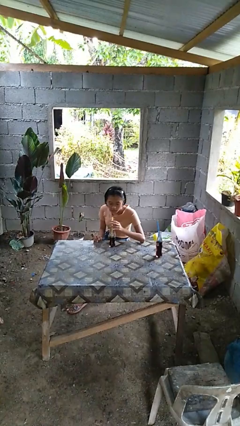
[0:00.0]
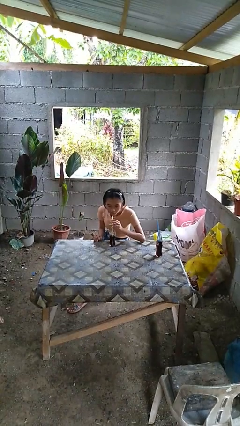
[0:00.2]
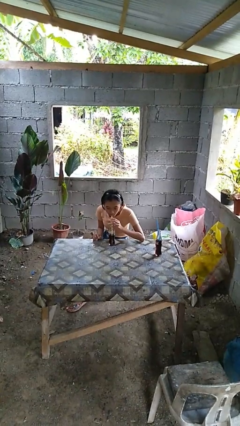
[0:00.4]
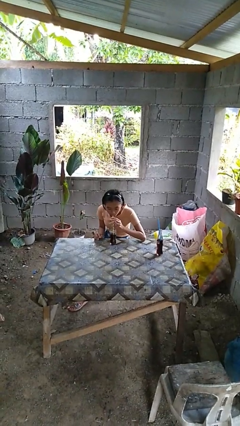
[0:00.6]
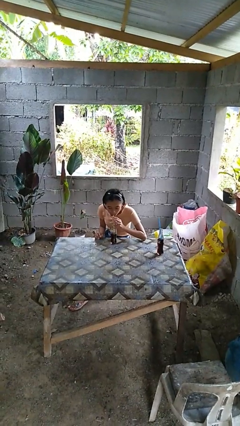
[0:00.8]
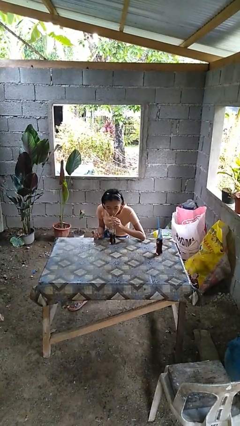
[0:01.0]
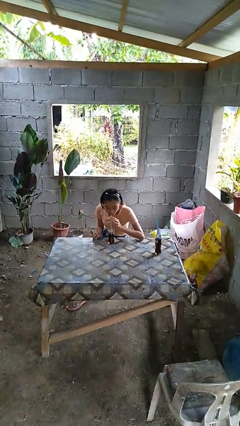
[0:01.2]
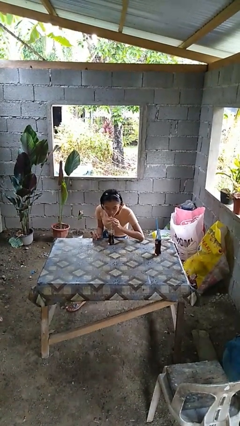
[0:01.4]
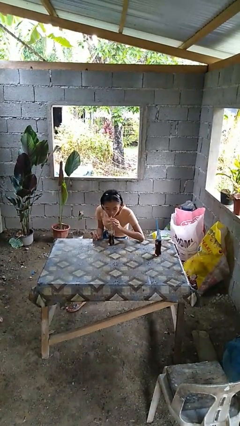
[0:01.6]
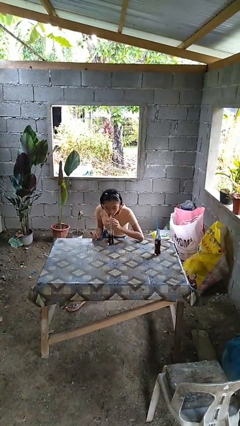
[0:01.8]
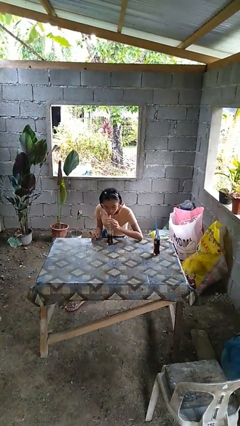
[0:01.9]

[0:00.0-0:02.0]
person drinks from straw

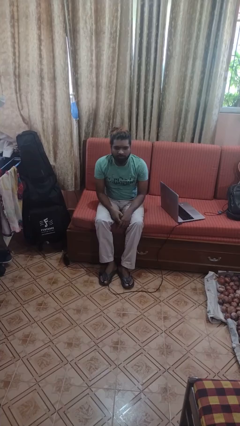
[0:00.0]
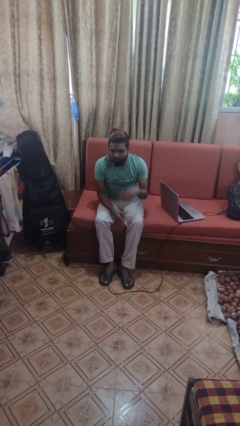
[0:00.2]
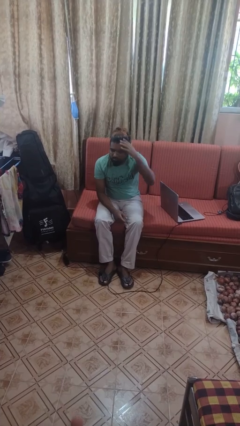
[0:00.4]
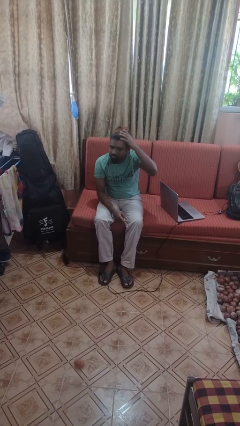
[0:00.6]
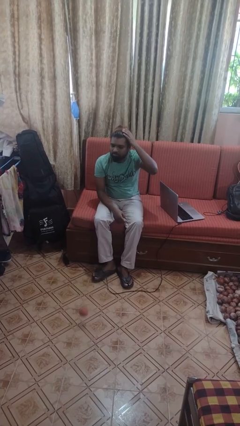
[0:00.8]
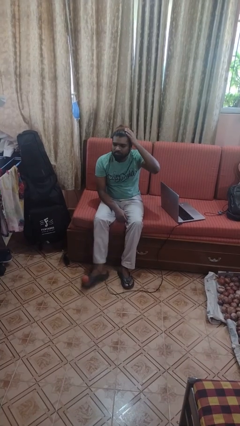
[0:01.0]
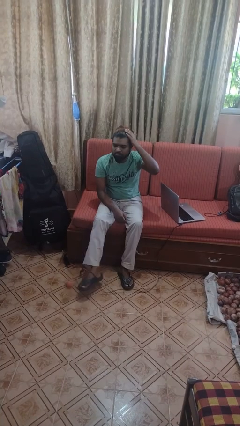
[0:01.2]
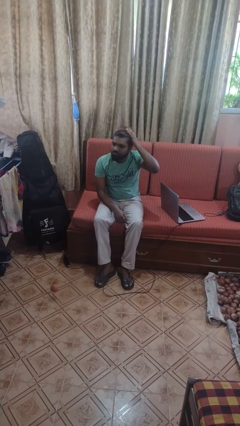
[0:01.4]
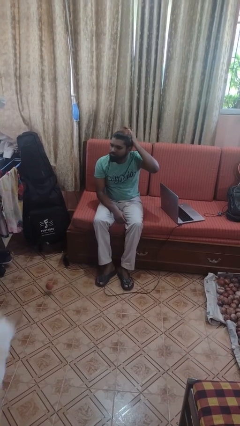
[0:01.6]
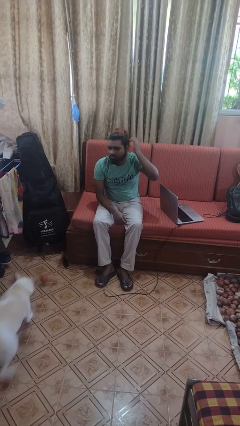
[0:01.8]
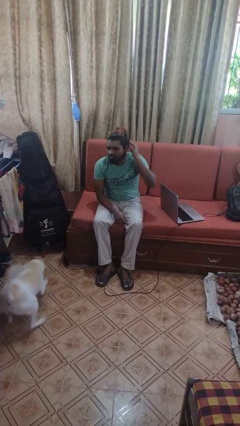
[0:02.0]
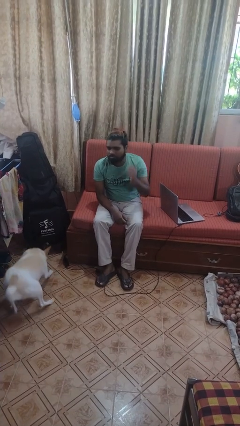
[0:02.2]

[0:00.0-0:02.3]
person strokes hair

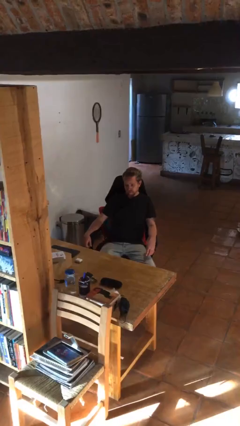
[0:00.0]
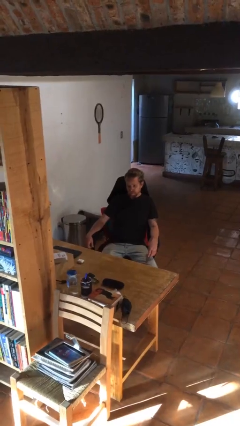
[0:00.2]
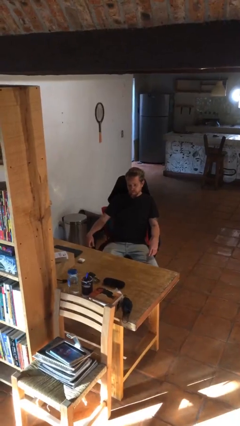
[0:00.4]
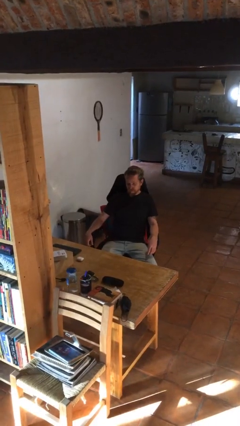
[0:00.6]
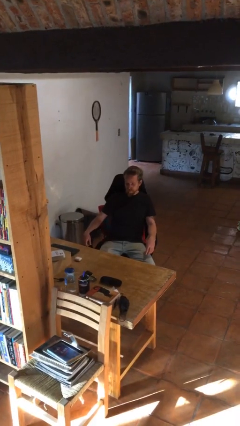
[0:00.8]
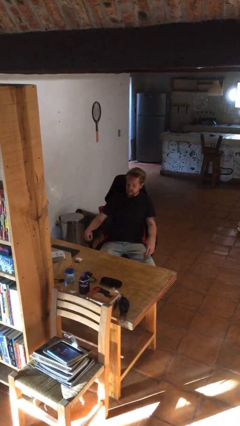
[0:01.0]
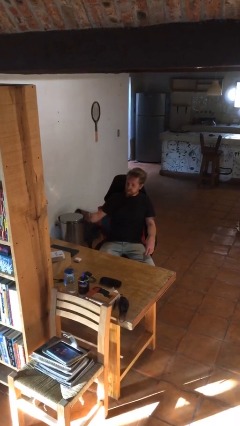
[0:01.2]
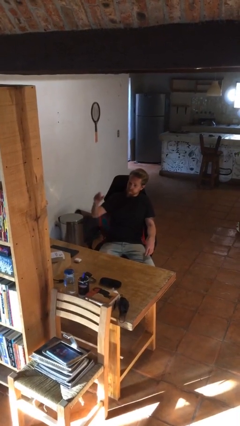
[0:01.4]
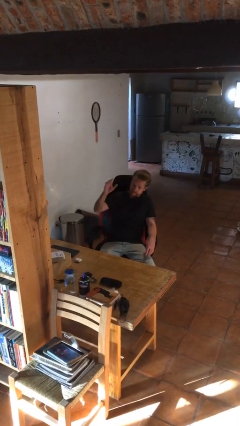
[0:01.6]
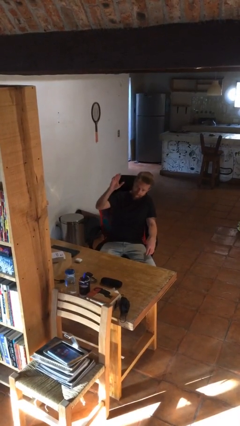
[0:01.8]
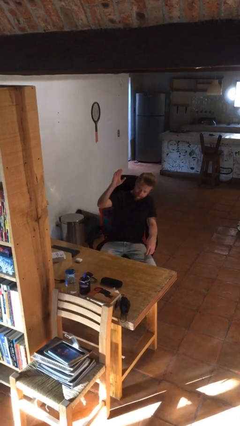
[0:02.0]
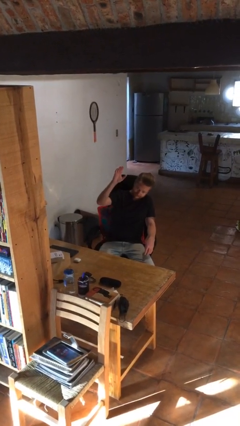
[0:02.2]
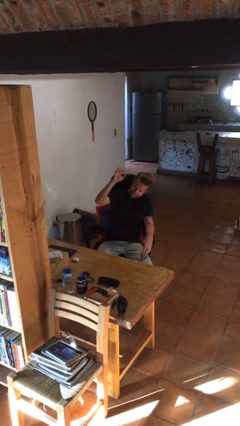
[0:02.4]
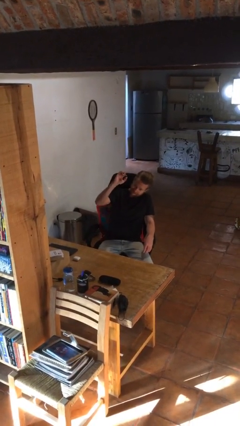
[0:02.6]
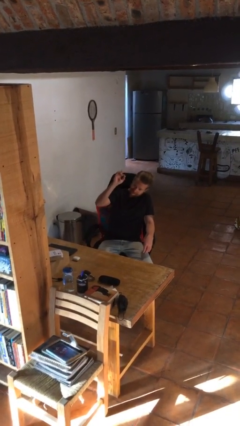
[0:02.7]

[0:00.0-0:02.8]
person gestures raise hand

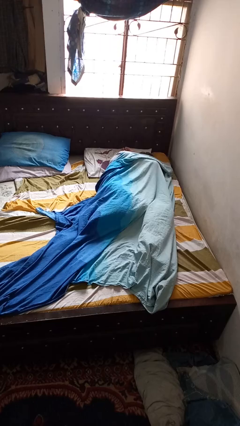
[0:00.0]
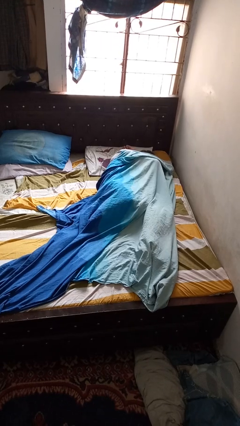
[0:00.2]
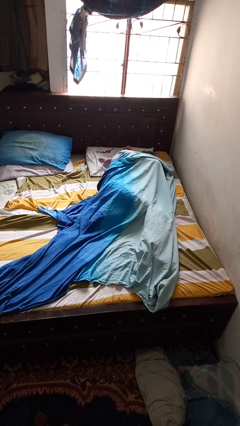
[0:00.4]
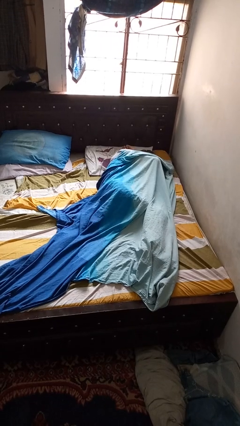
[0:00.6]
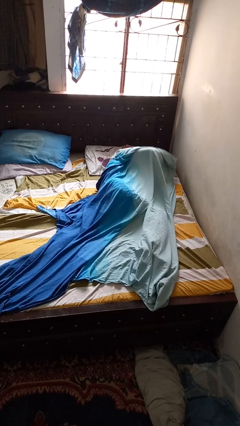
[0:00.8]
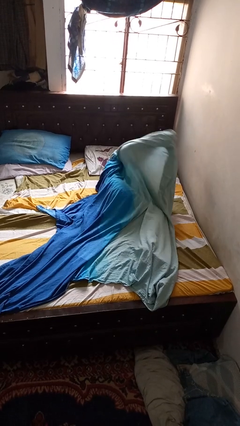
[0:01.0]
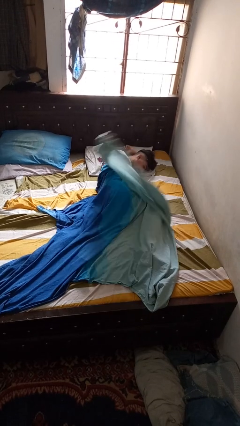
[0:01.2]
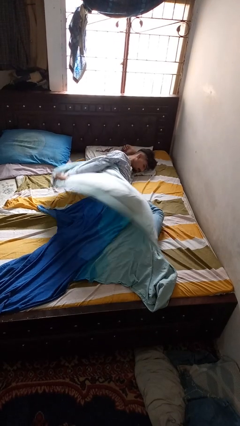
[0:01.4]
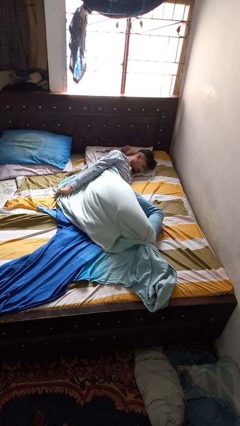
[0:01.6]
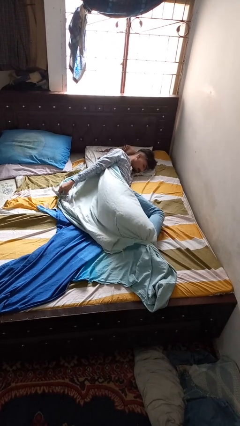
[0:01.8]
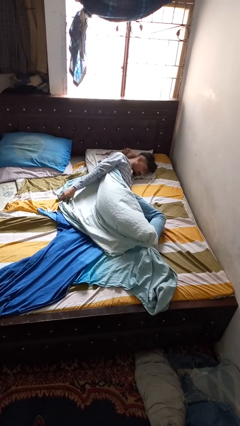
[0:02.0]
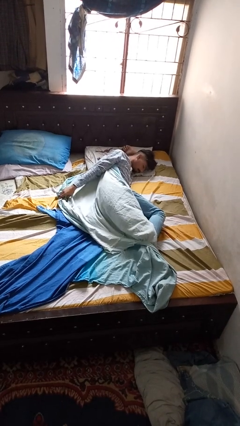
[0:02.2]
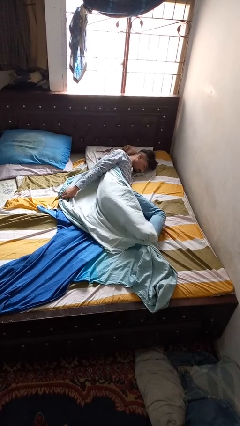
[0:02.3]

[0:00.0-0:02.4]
person uncovers with blanket

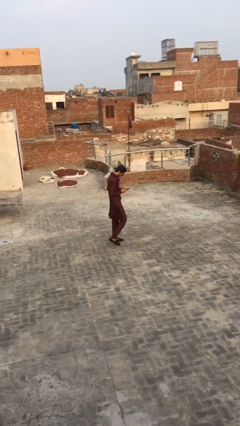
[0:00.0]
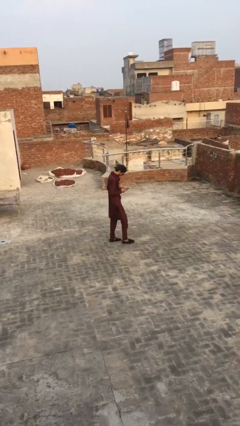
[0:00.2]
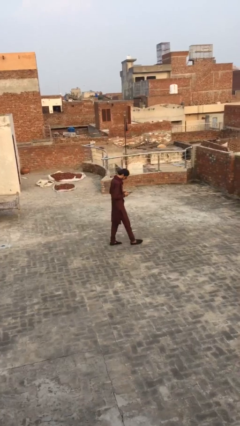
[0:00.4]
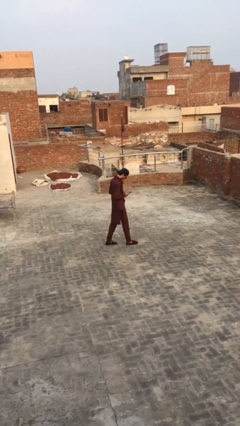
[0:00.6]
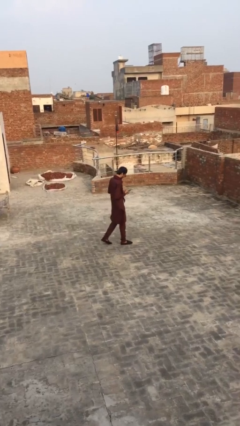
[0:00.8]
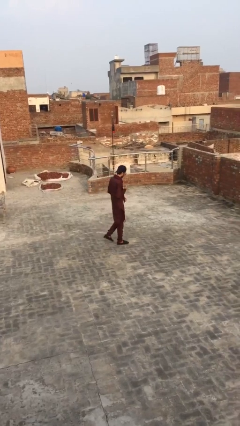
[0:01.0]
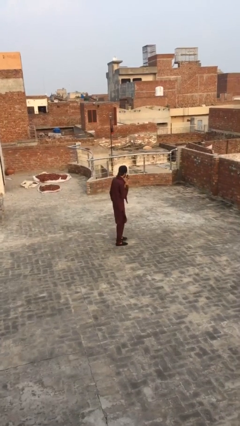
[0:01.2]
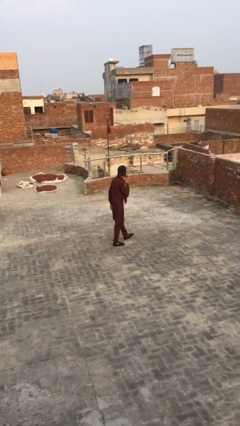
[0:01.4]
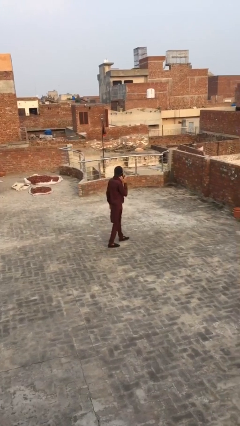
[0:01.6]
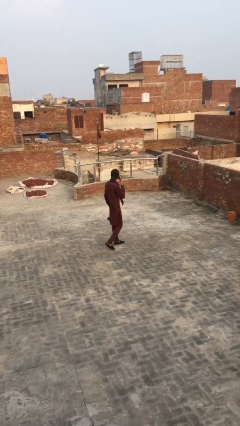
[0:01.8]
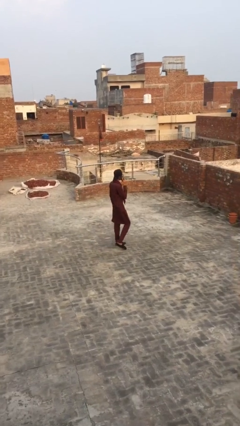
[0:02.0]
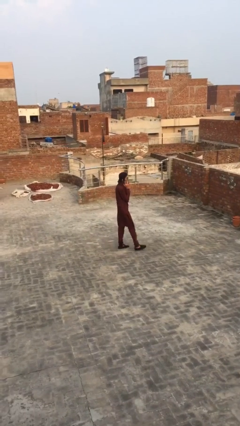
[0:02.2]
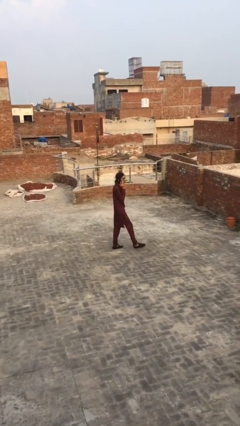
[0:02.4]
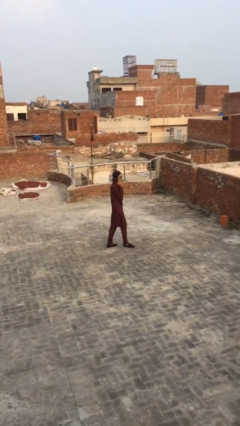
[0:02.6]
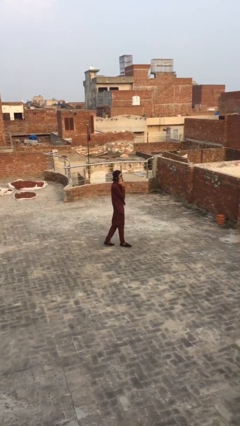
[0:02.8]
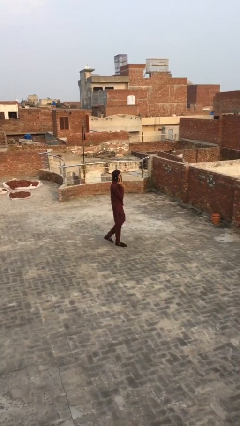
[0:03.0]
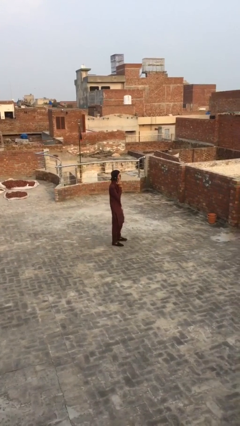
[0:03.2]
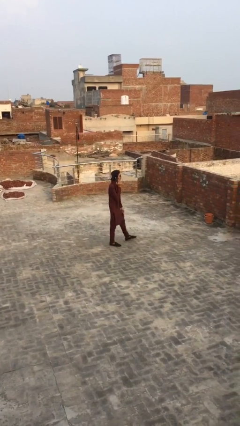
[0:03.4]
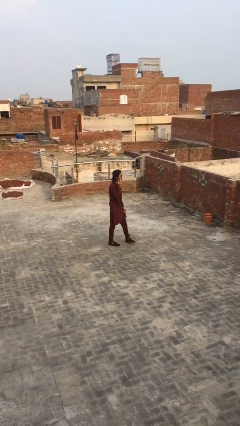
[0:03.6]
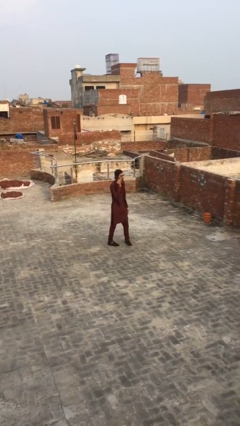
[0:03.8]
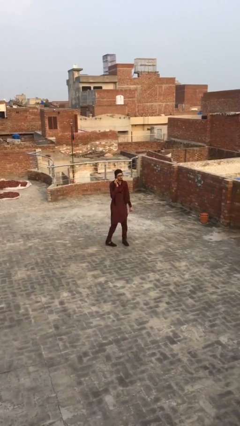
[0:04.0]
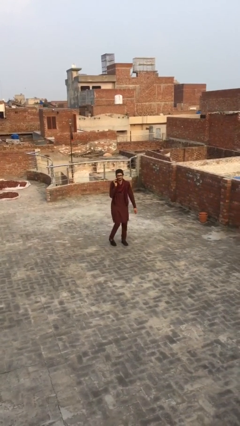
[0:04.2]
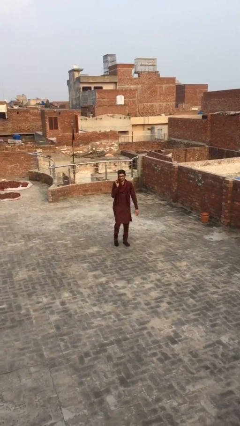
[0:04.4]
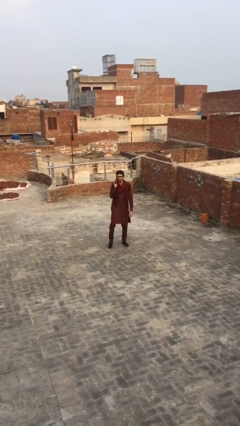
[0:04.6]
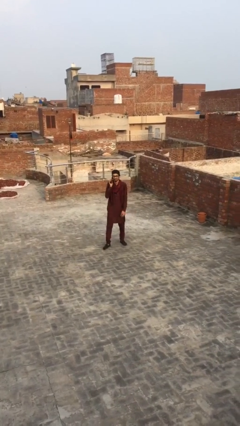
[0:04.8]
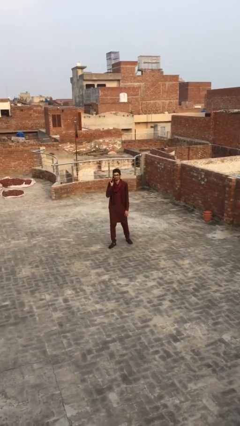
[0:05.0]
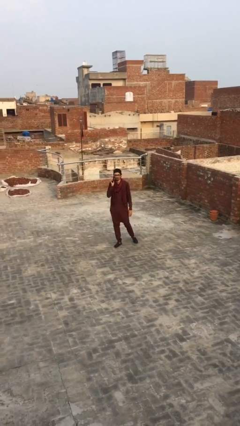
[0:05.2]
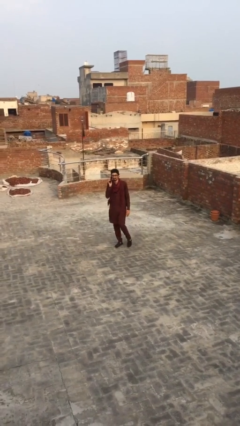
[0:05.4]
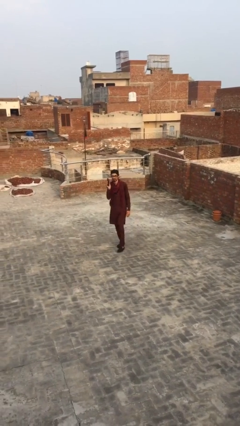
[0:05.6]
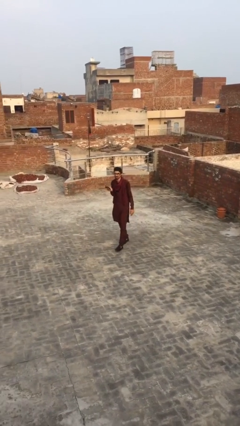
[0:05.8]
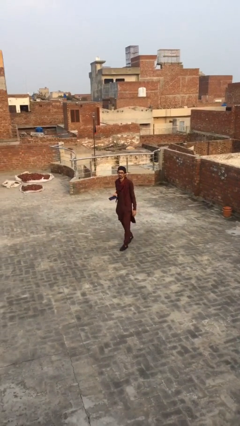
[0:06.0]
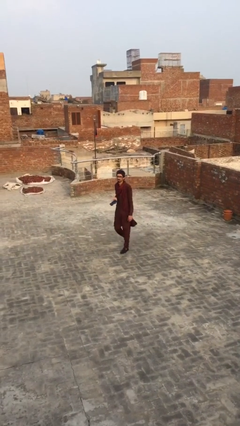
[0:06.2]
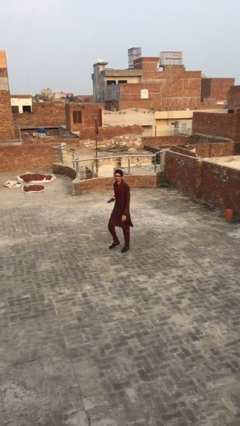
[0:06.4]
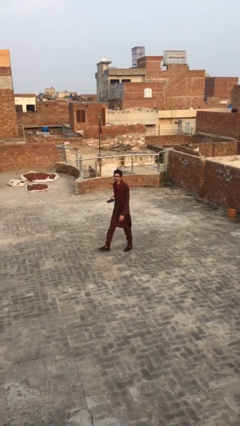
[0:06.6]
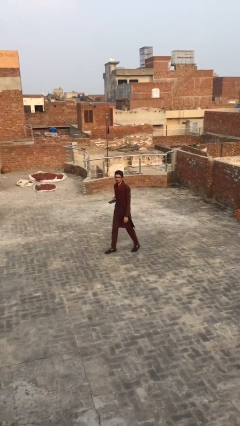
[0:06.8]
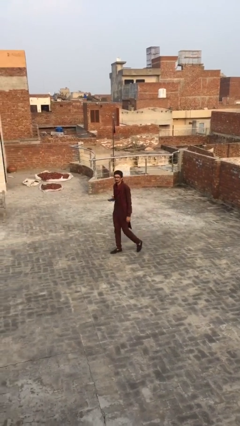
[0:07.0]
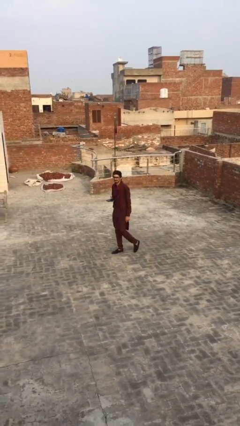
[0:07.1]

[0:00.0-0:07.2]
person talks on phone

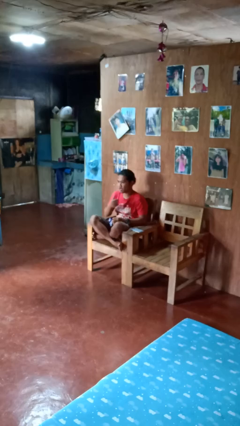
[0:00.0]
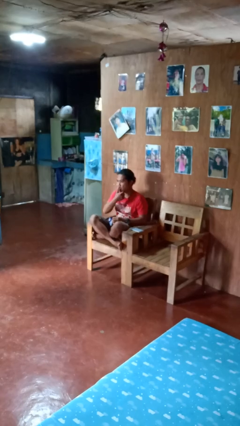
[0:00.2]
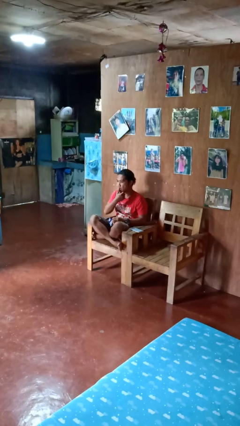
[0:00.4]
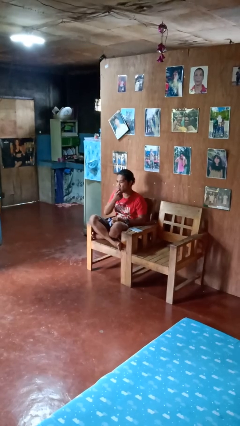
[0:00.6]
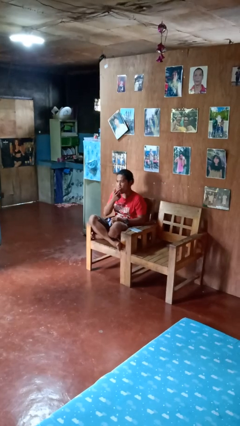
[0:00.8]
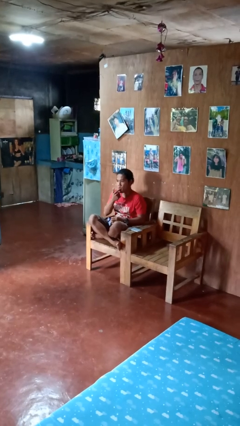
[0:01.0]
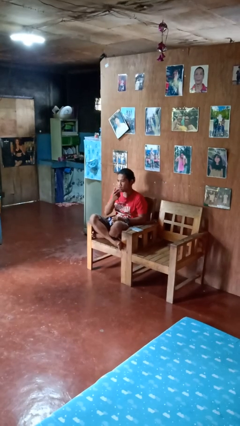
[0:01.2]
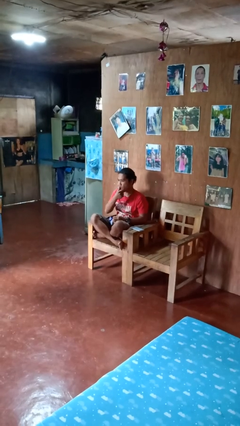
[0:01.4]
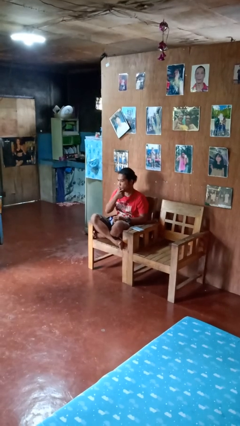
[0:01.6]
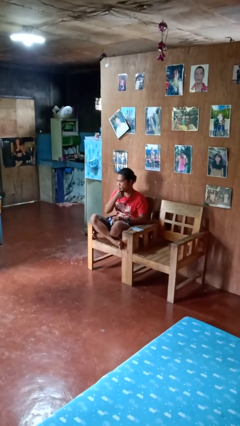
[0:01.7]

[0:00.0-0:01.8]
person licks fingers
